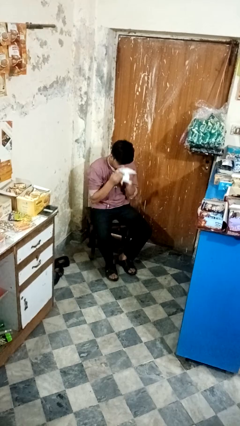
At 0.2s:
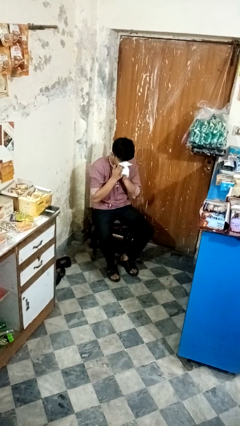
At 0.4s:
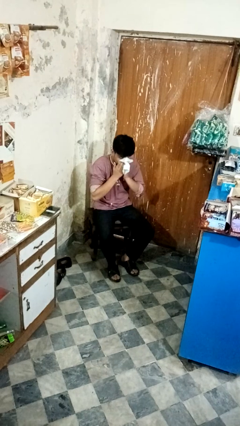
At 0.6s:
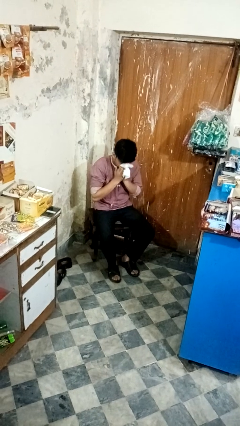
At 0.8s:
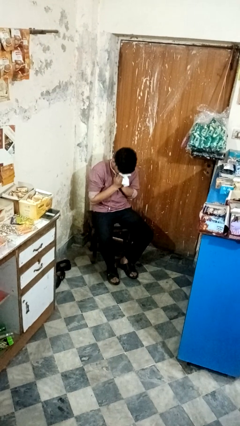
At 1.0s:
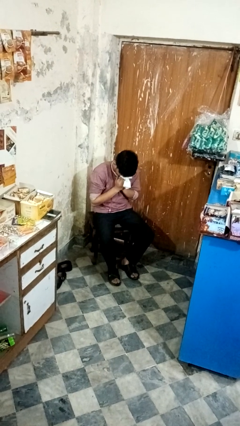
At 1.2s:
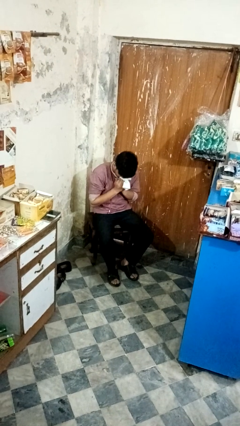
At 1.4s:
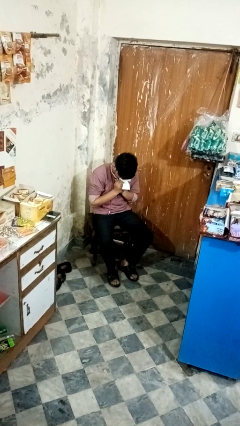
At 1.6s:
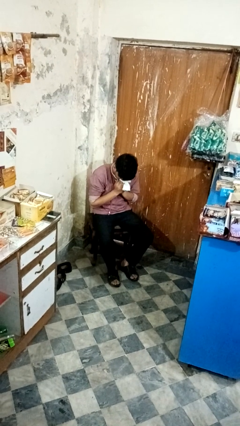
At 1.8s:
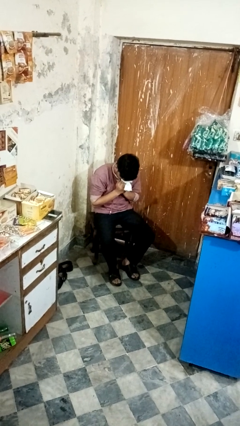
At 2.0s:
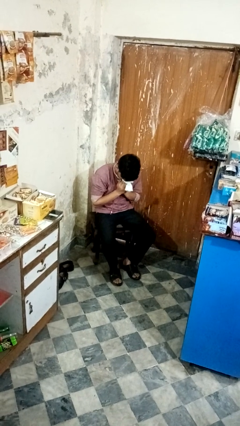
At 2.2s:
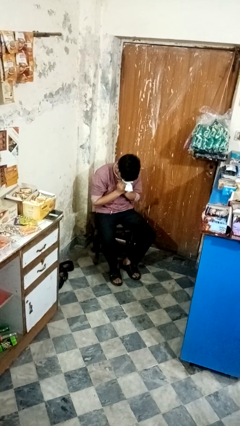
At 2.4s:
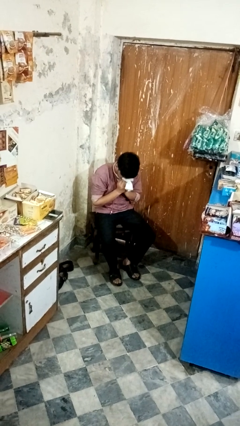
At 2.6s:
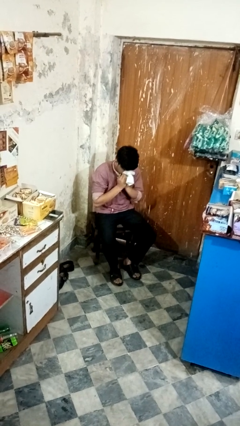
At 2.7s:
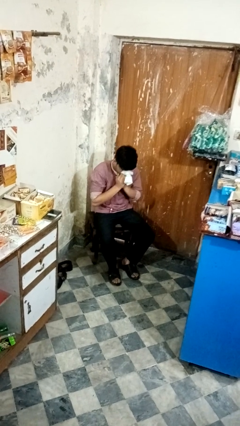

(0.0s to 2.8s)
person blows nose

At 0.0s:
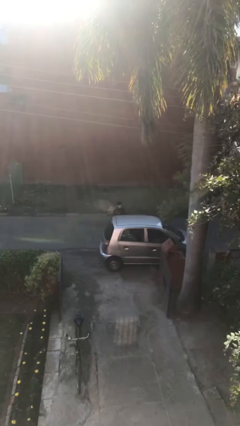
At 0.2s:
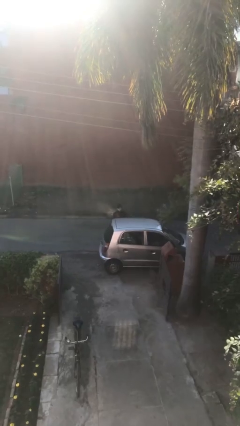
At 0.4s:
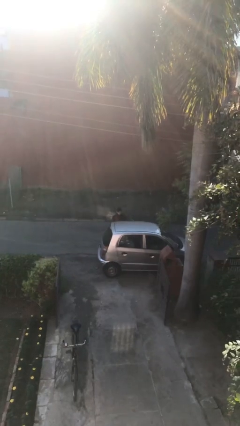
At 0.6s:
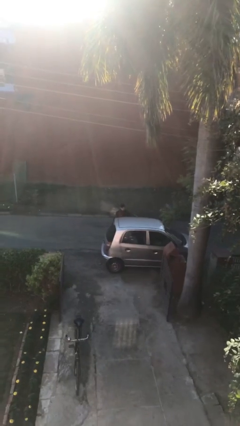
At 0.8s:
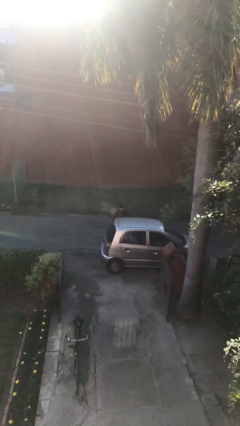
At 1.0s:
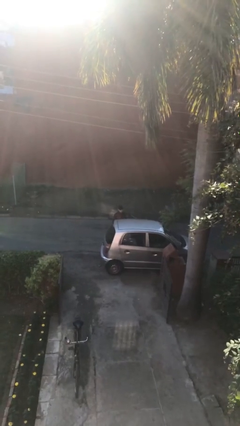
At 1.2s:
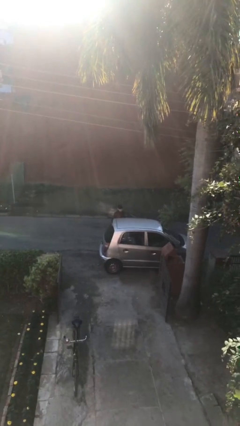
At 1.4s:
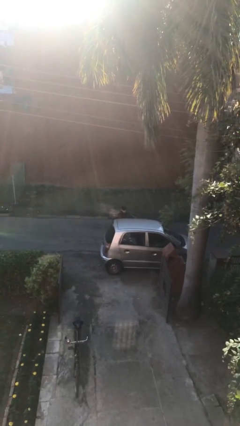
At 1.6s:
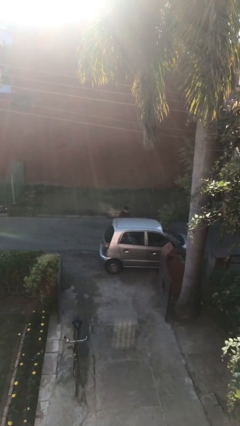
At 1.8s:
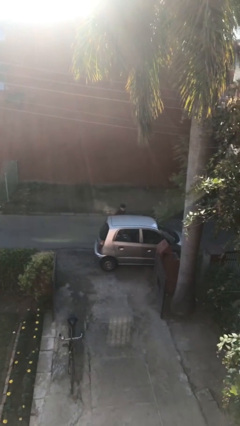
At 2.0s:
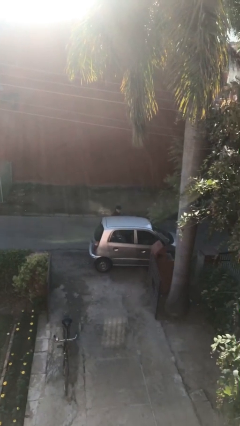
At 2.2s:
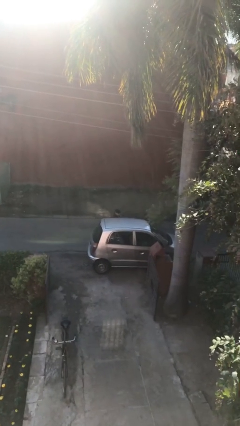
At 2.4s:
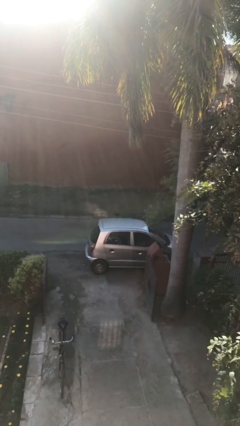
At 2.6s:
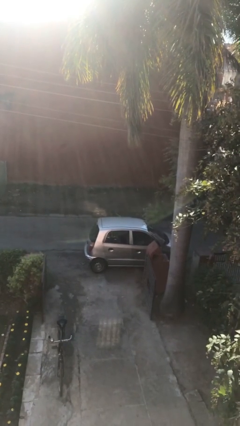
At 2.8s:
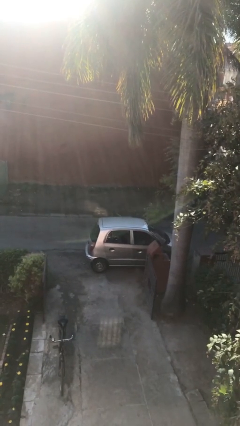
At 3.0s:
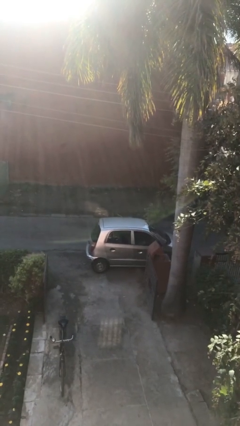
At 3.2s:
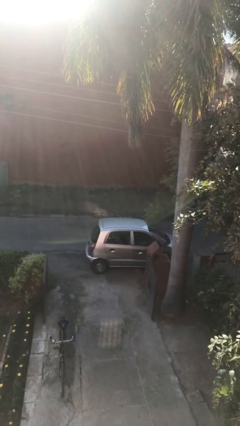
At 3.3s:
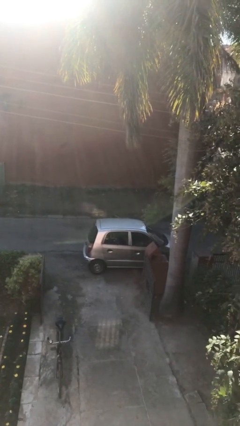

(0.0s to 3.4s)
person enters car

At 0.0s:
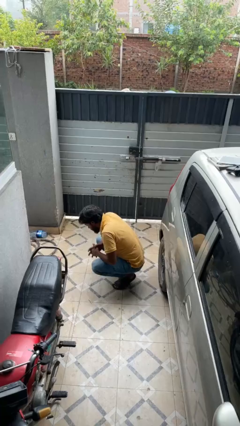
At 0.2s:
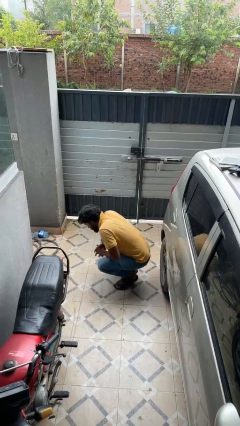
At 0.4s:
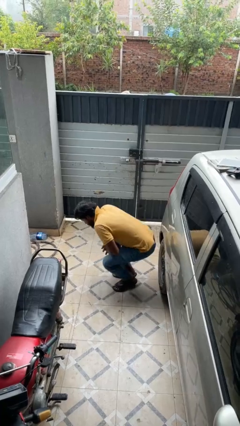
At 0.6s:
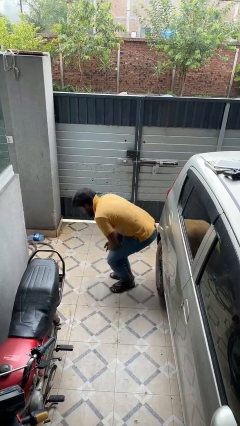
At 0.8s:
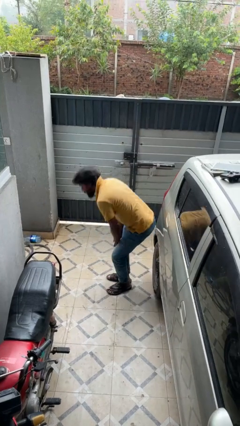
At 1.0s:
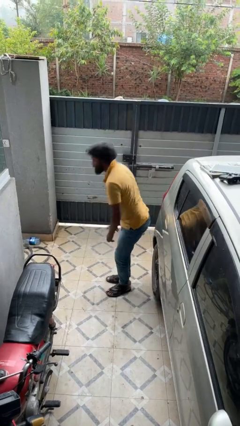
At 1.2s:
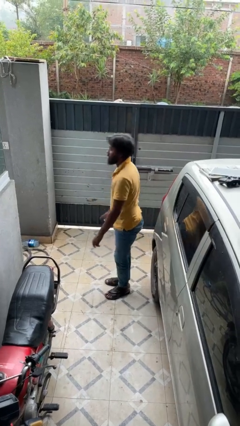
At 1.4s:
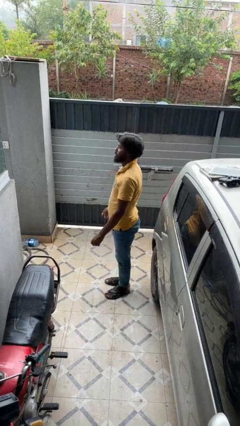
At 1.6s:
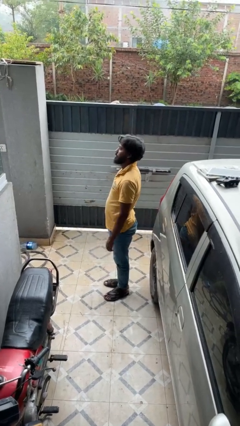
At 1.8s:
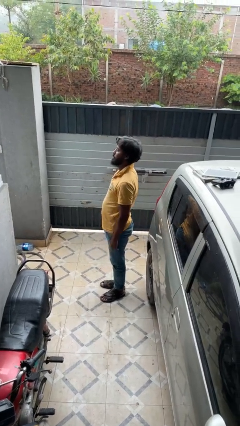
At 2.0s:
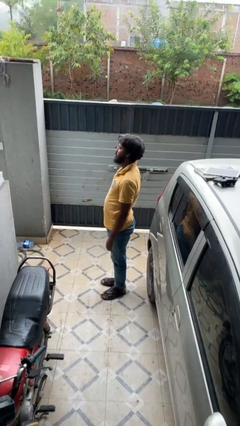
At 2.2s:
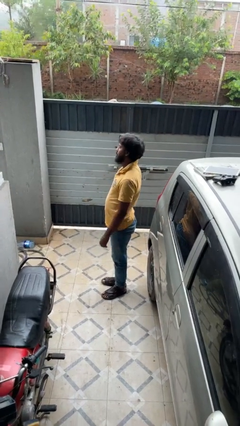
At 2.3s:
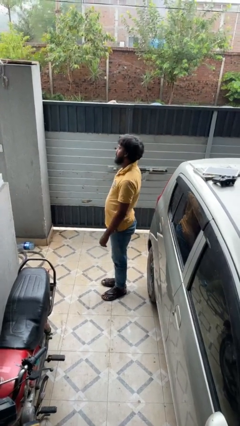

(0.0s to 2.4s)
person stands up

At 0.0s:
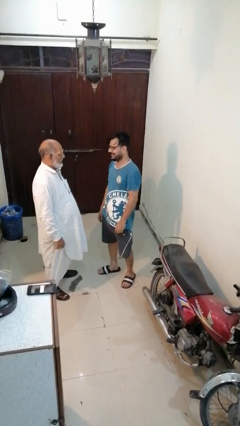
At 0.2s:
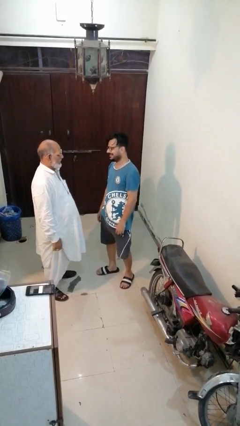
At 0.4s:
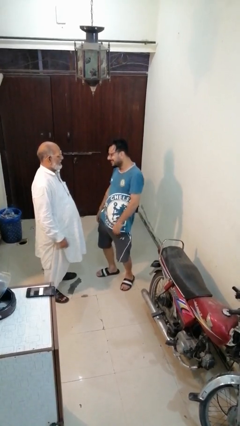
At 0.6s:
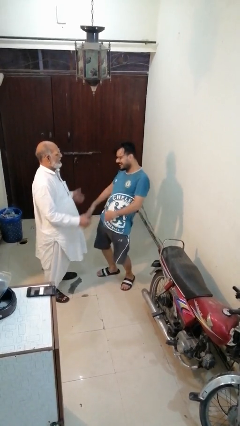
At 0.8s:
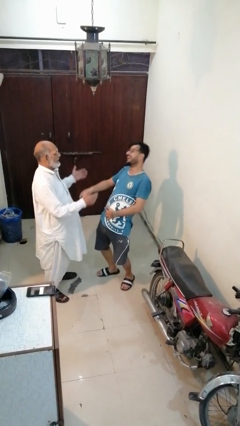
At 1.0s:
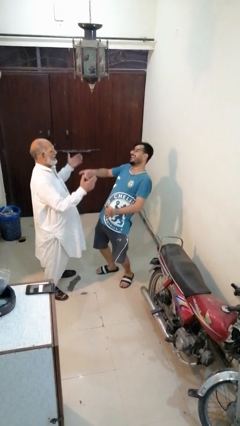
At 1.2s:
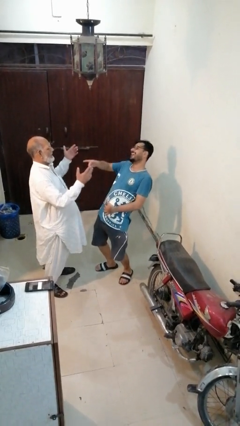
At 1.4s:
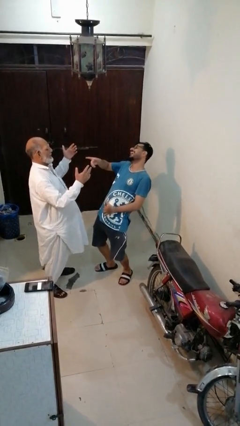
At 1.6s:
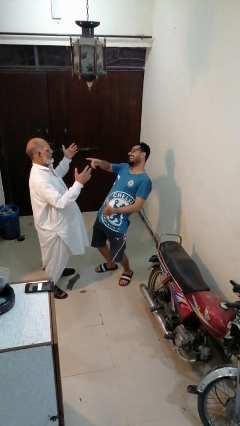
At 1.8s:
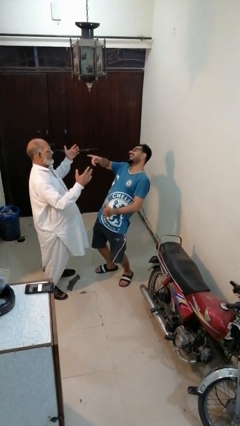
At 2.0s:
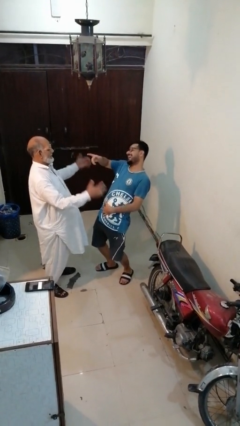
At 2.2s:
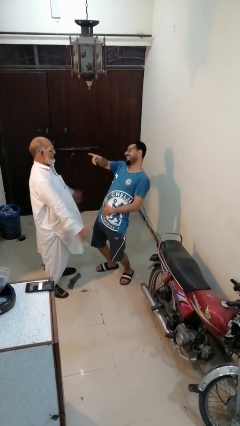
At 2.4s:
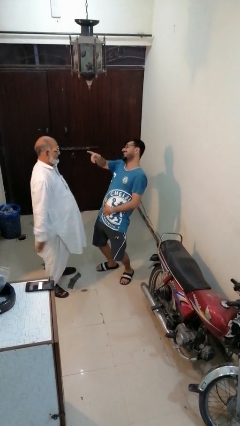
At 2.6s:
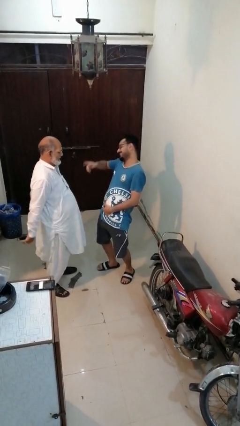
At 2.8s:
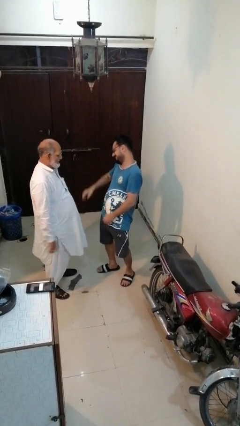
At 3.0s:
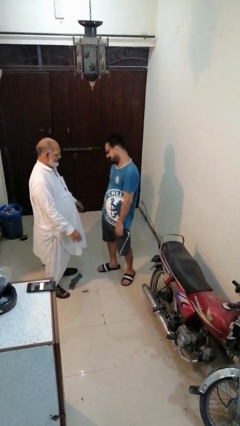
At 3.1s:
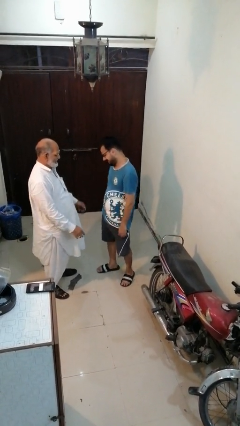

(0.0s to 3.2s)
person laughs with person

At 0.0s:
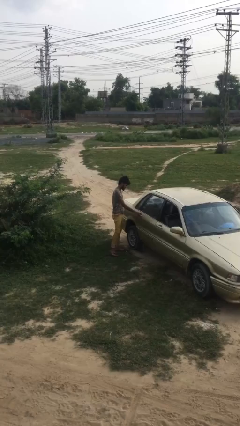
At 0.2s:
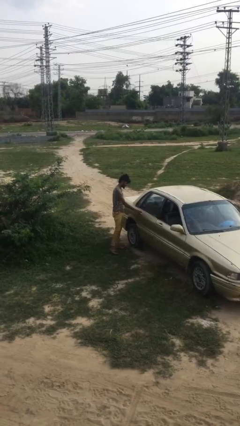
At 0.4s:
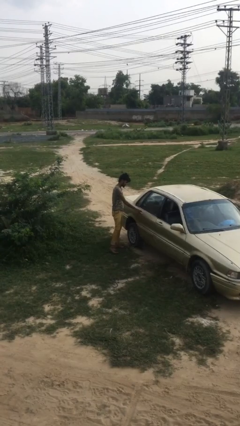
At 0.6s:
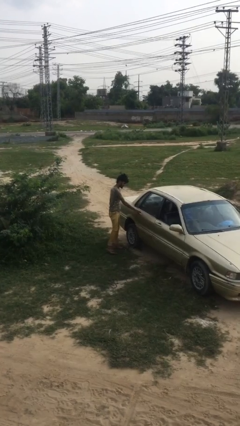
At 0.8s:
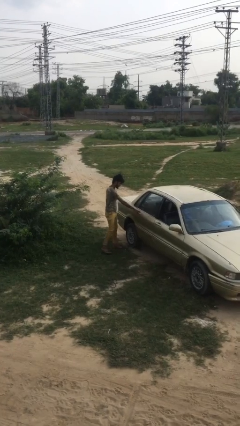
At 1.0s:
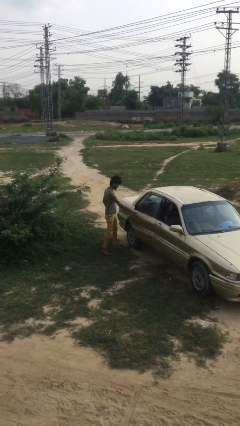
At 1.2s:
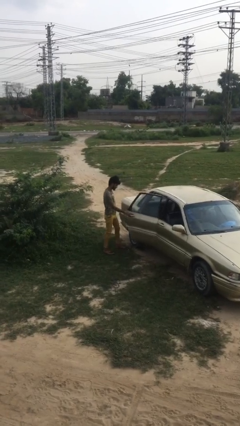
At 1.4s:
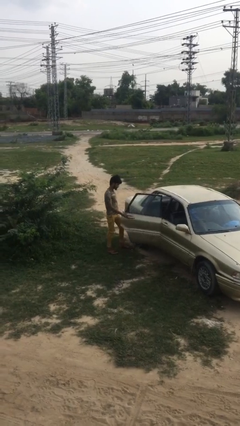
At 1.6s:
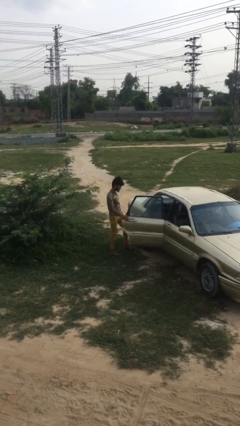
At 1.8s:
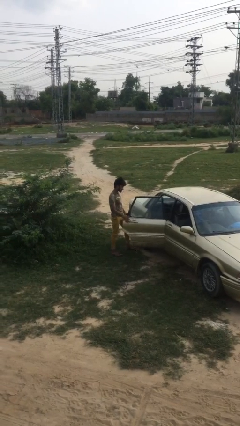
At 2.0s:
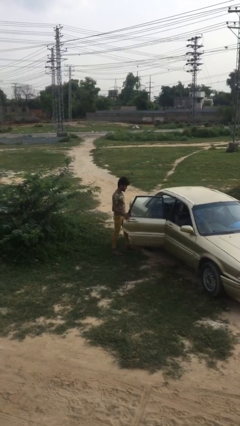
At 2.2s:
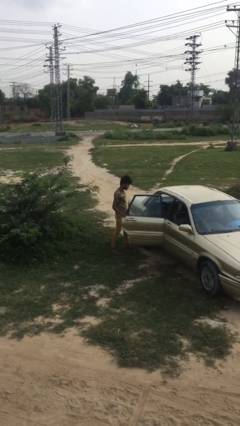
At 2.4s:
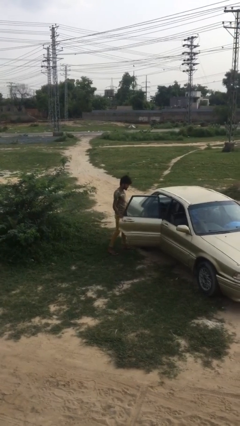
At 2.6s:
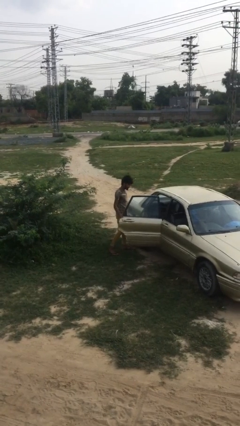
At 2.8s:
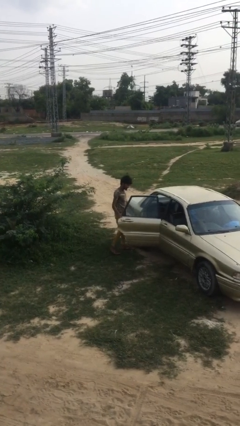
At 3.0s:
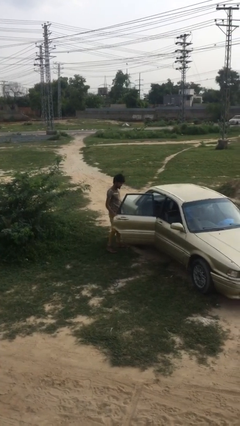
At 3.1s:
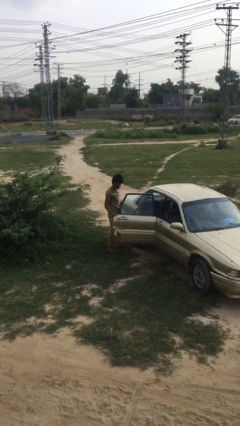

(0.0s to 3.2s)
person opens car door

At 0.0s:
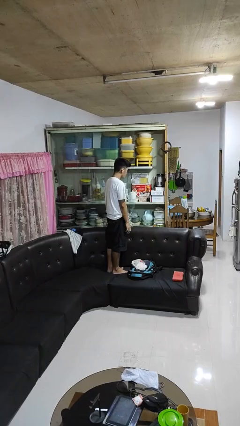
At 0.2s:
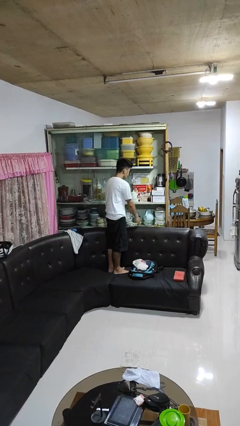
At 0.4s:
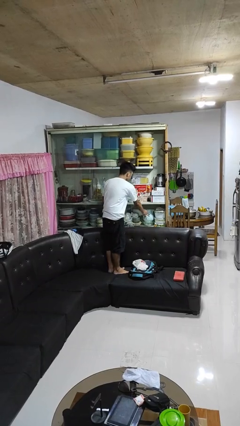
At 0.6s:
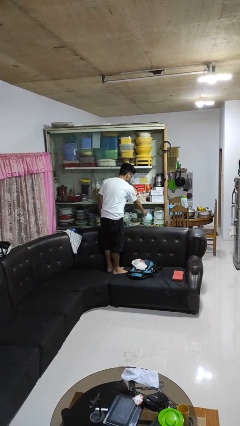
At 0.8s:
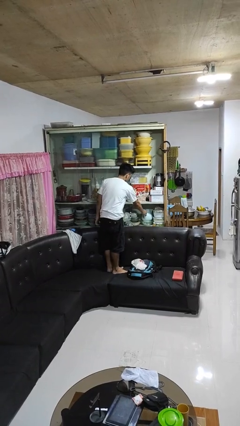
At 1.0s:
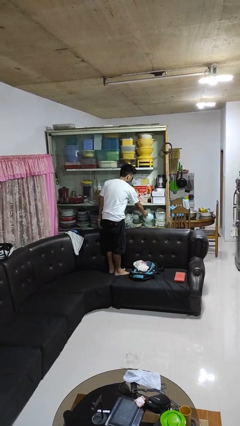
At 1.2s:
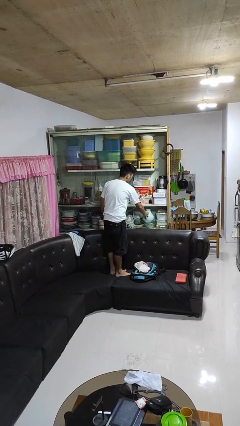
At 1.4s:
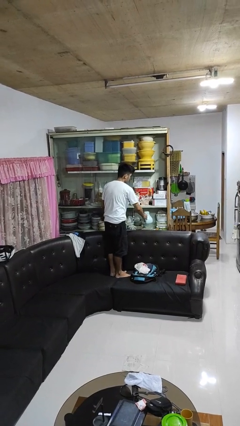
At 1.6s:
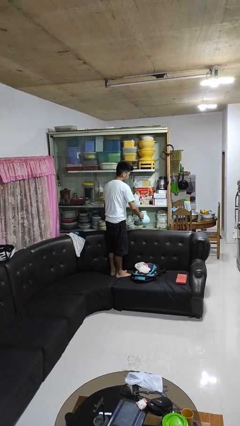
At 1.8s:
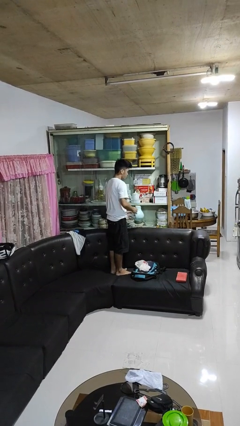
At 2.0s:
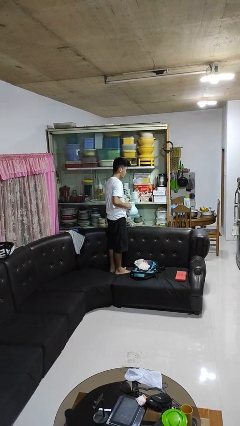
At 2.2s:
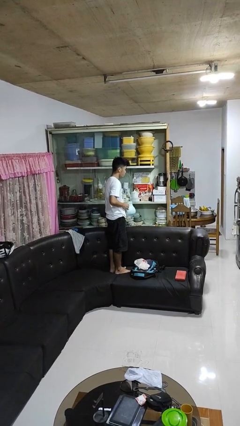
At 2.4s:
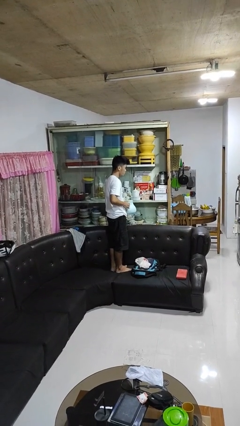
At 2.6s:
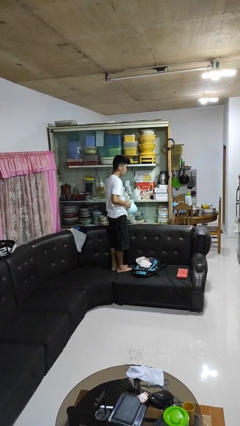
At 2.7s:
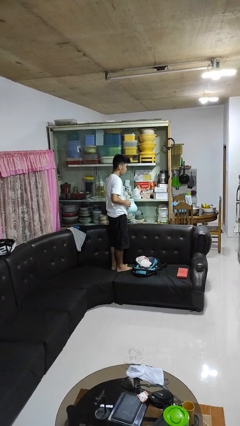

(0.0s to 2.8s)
person picks up object from cabinet
